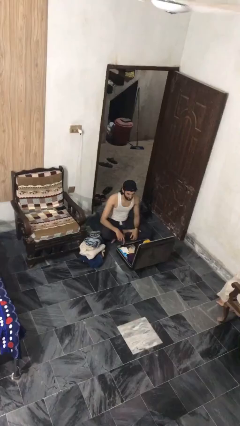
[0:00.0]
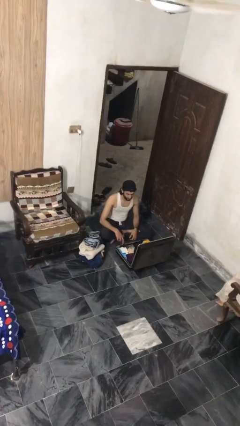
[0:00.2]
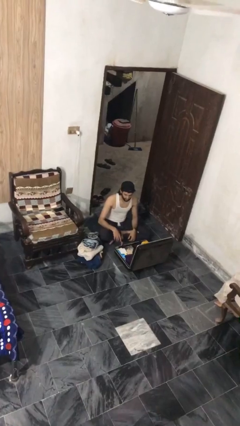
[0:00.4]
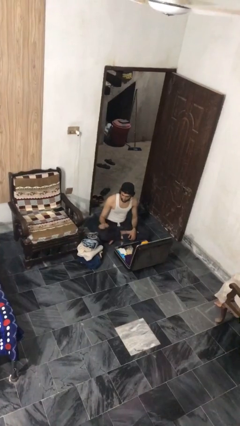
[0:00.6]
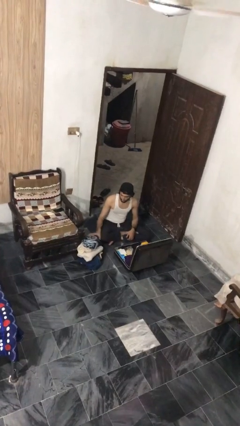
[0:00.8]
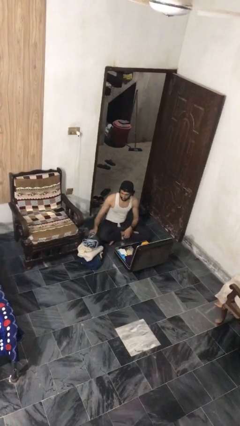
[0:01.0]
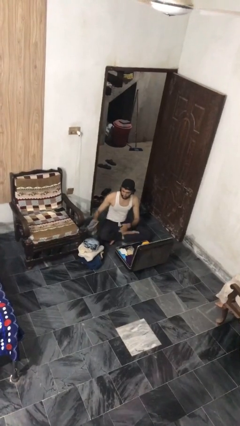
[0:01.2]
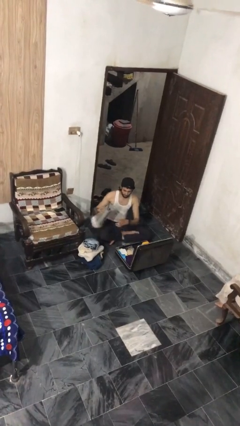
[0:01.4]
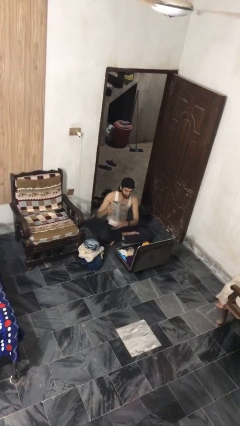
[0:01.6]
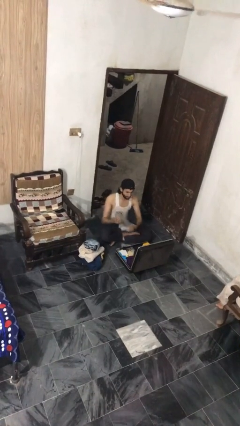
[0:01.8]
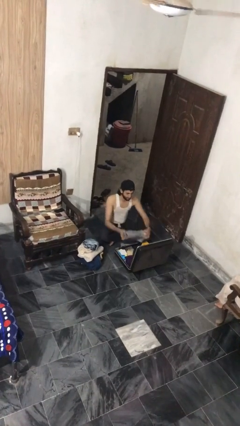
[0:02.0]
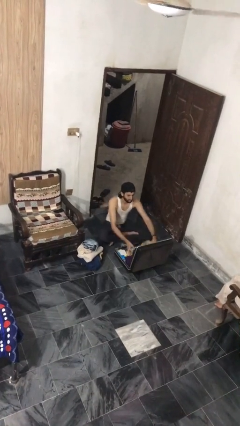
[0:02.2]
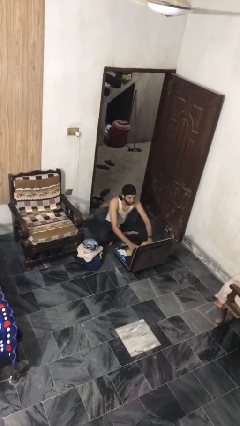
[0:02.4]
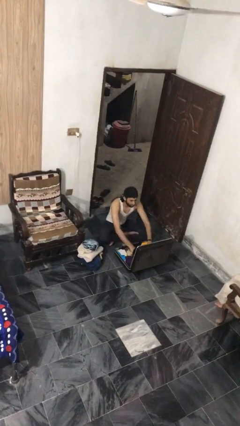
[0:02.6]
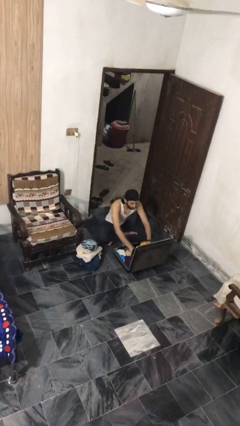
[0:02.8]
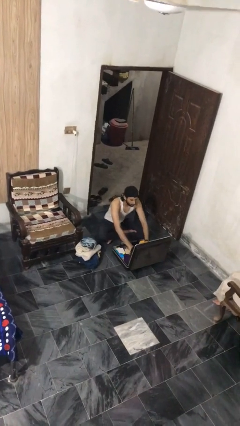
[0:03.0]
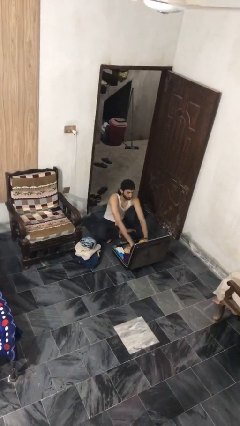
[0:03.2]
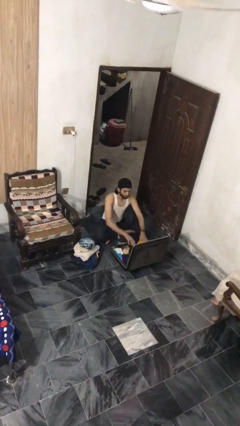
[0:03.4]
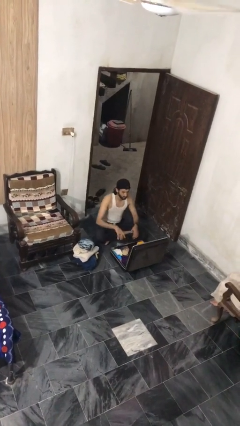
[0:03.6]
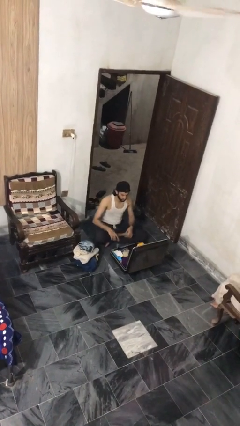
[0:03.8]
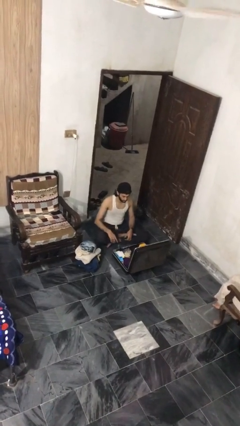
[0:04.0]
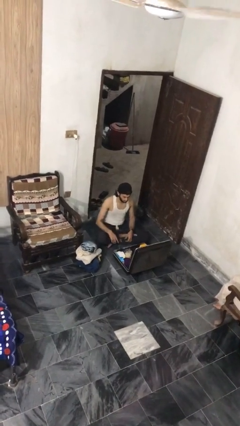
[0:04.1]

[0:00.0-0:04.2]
person loads clothes into suitcase

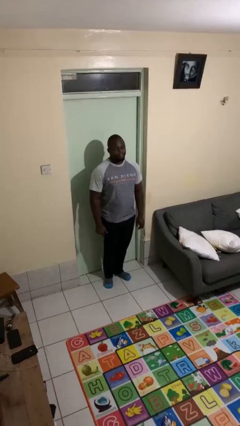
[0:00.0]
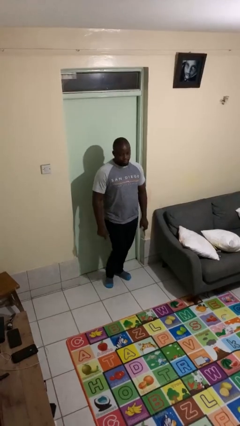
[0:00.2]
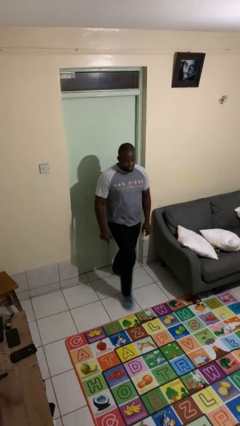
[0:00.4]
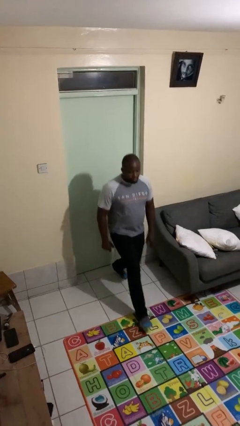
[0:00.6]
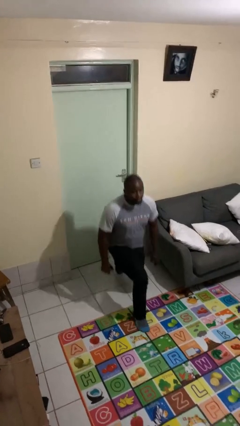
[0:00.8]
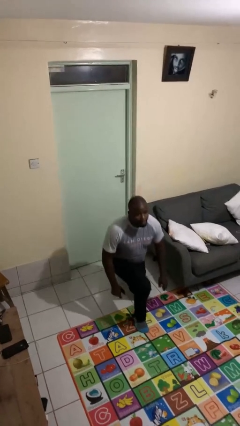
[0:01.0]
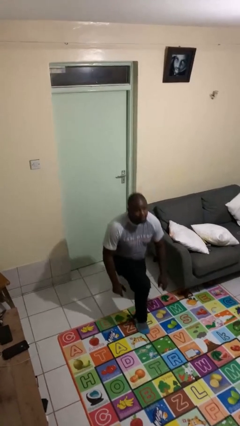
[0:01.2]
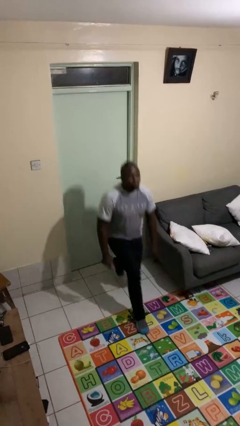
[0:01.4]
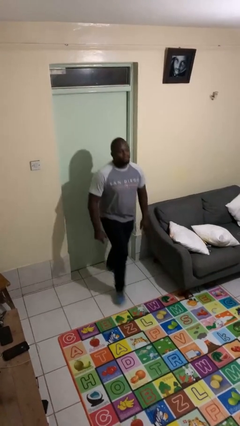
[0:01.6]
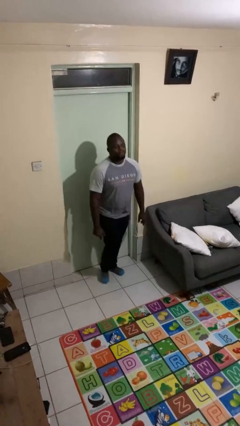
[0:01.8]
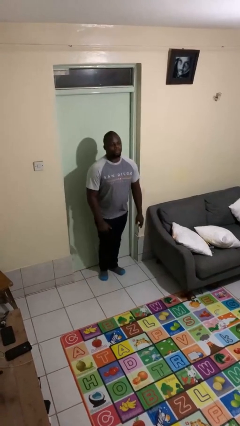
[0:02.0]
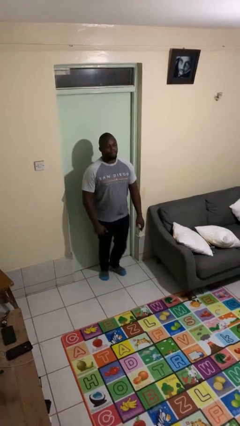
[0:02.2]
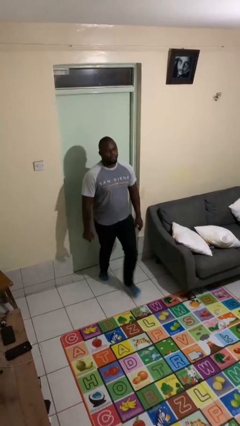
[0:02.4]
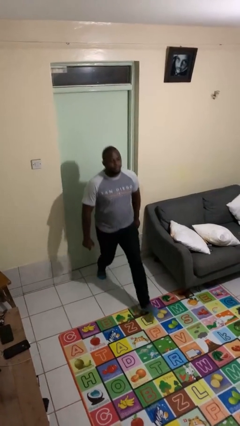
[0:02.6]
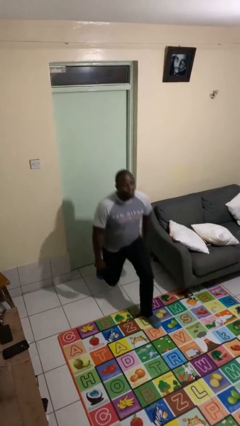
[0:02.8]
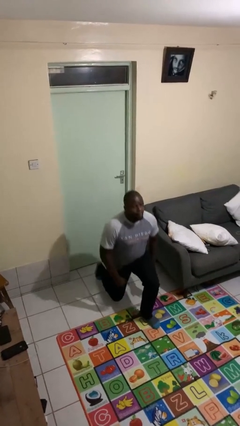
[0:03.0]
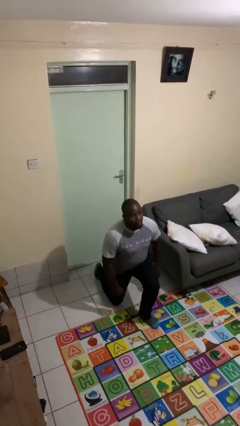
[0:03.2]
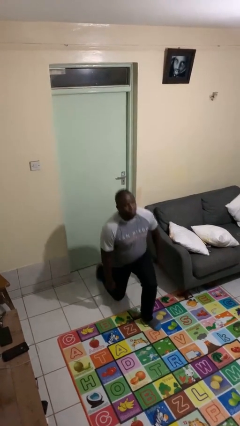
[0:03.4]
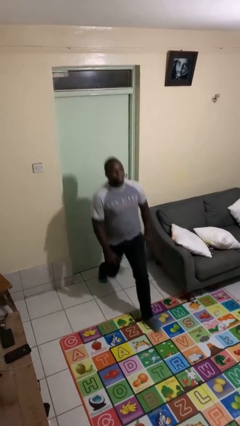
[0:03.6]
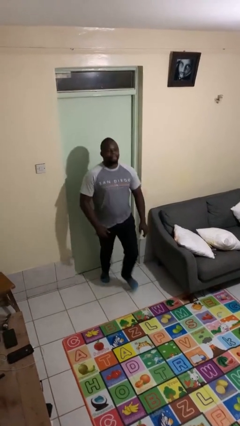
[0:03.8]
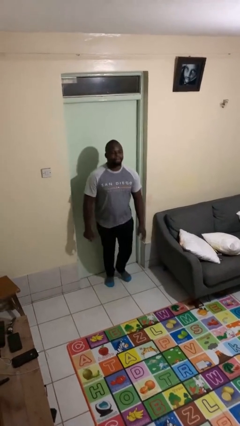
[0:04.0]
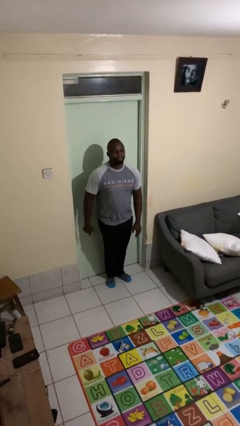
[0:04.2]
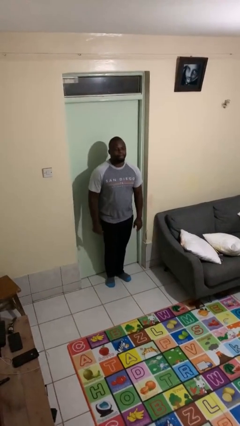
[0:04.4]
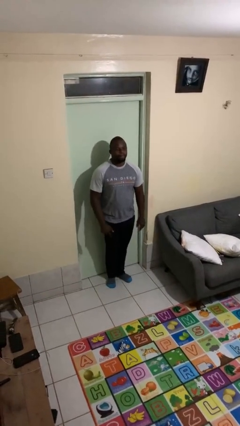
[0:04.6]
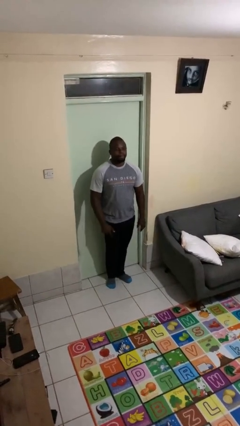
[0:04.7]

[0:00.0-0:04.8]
person exercises with lunges

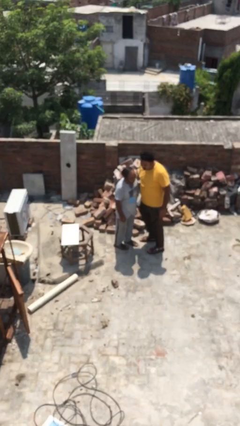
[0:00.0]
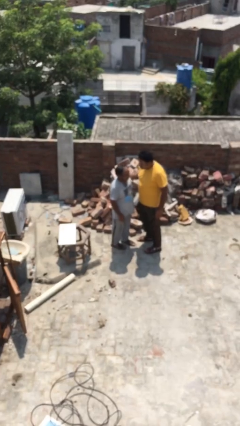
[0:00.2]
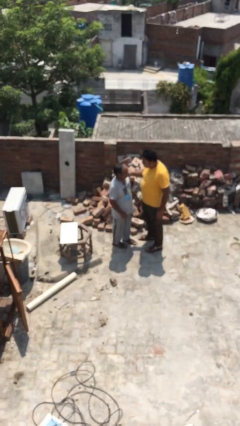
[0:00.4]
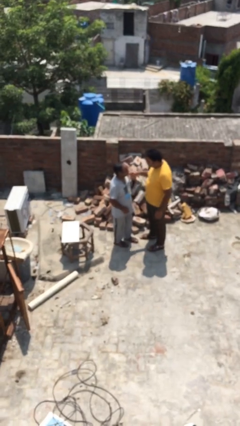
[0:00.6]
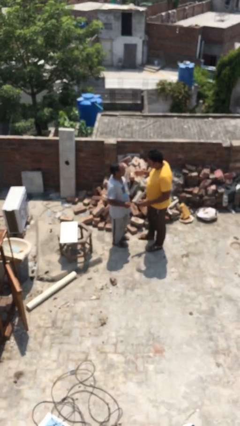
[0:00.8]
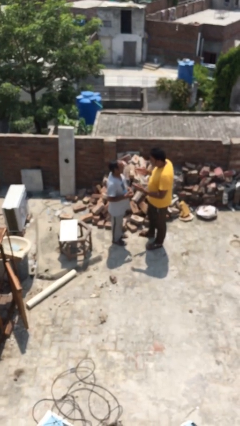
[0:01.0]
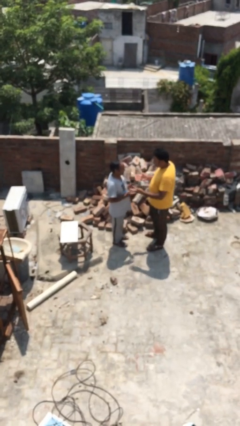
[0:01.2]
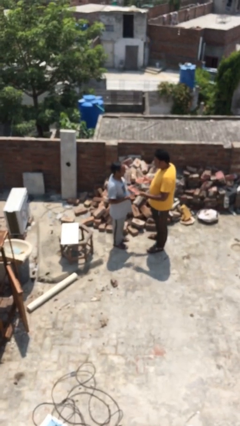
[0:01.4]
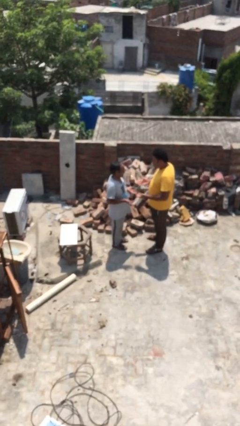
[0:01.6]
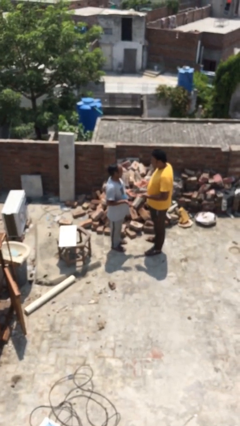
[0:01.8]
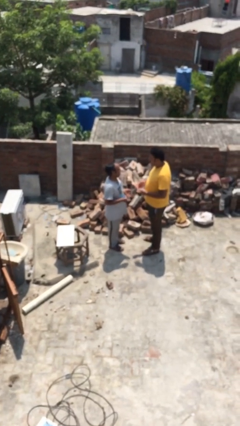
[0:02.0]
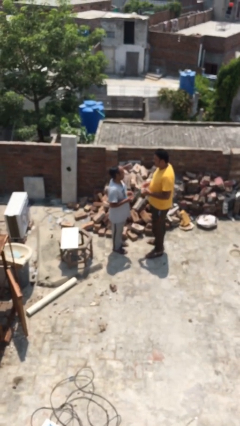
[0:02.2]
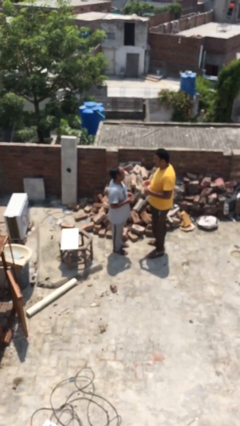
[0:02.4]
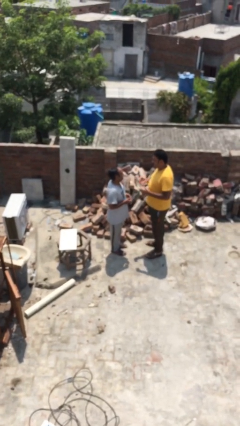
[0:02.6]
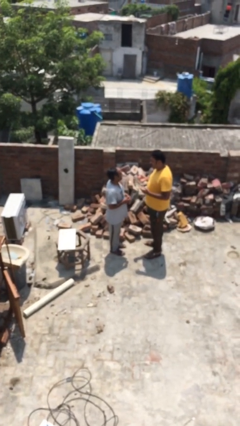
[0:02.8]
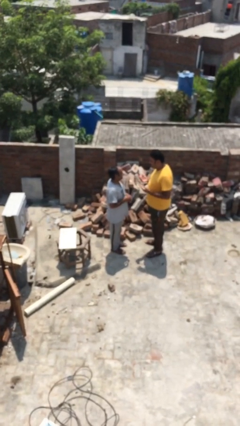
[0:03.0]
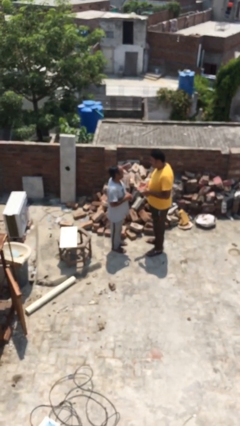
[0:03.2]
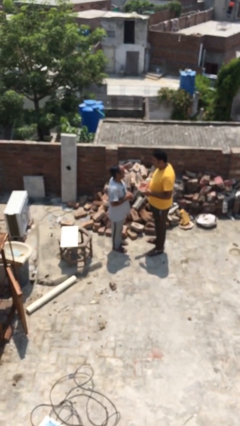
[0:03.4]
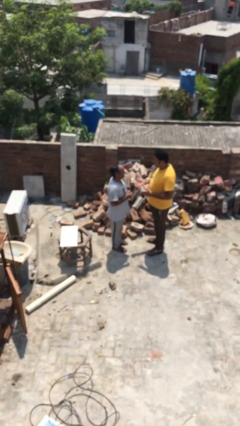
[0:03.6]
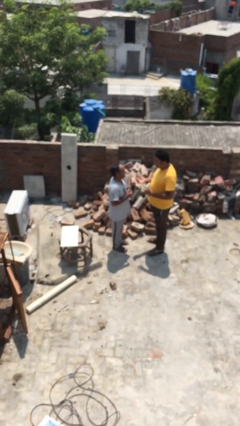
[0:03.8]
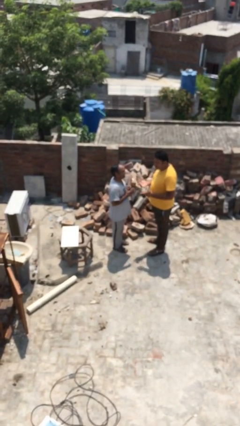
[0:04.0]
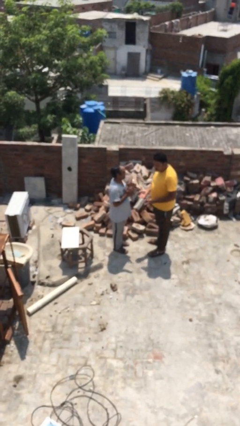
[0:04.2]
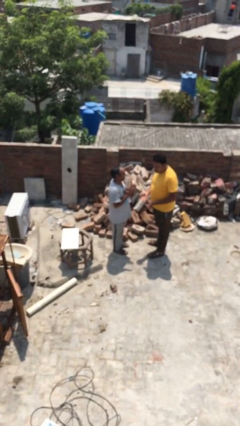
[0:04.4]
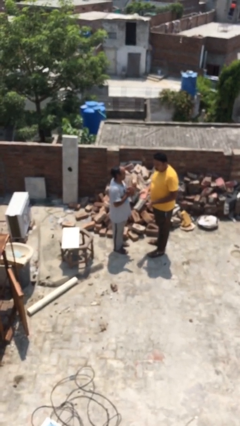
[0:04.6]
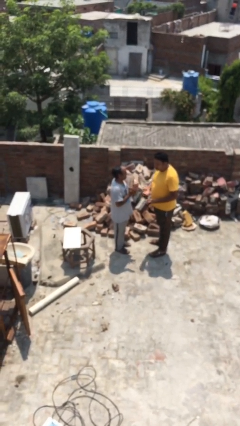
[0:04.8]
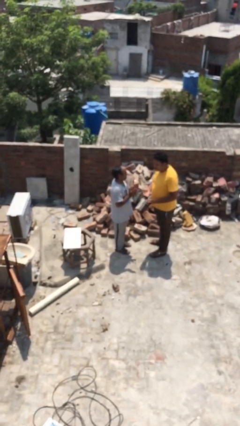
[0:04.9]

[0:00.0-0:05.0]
person talks to person

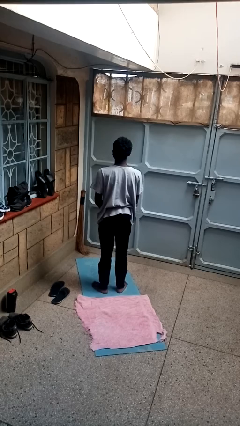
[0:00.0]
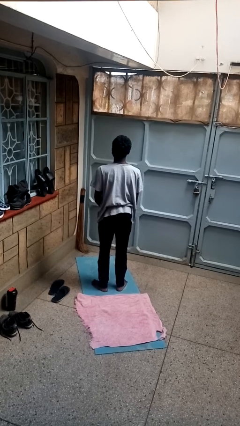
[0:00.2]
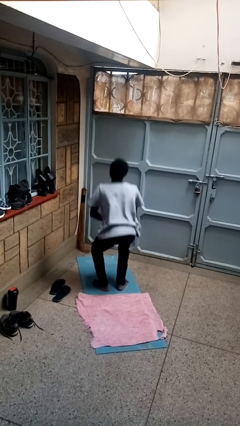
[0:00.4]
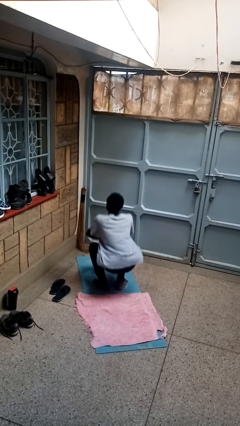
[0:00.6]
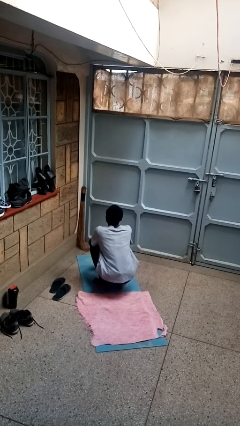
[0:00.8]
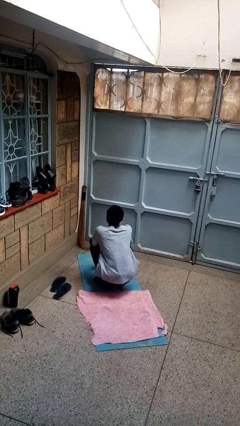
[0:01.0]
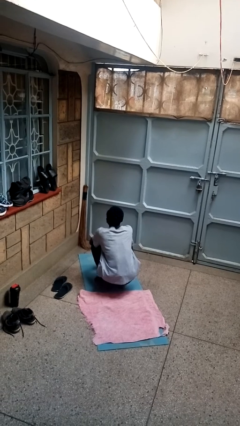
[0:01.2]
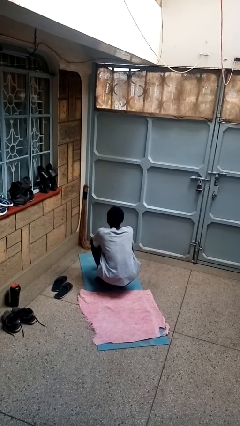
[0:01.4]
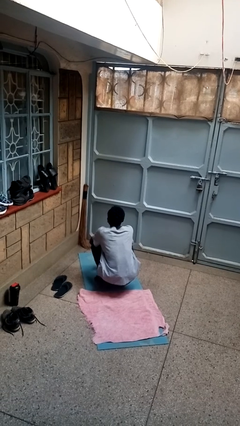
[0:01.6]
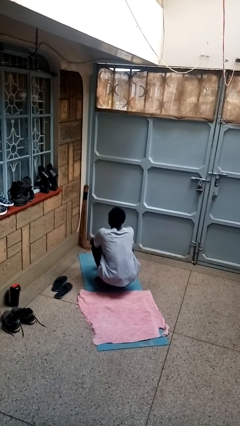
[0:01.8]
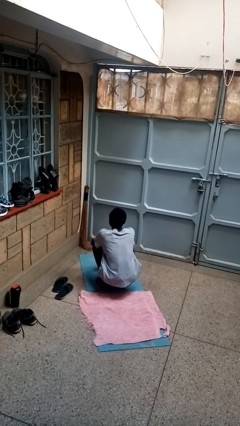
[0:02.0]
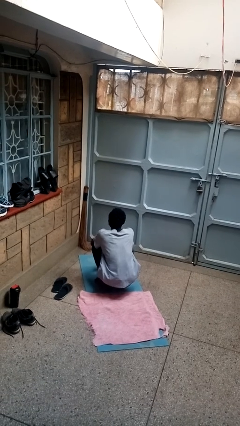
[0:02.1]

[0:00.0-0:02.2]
person squats

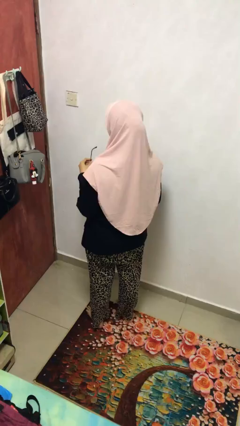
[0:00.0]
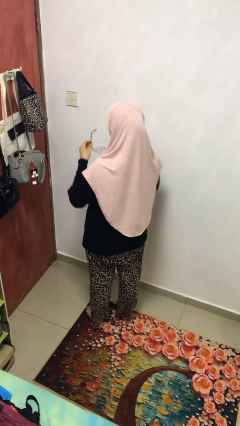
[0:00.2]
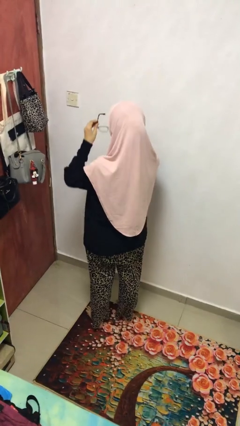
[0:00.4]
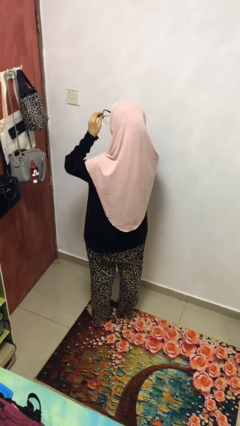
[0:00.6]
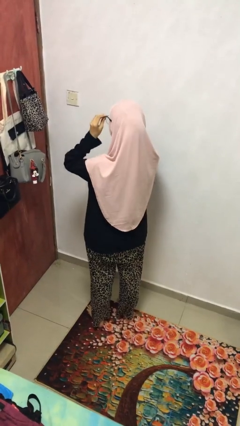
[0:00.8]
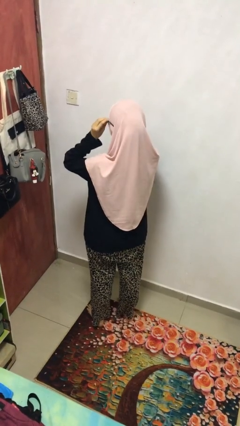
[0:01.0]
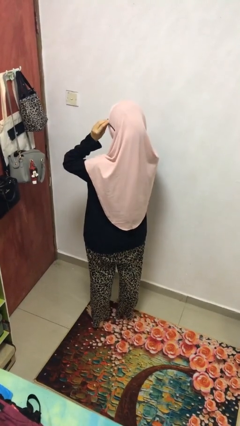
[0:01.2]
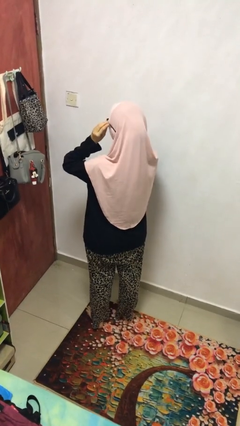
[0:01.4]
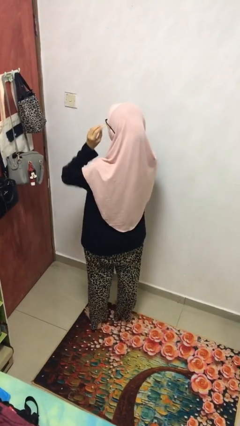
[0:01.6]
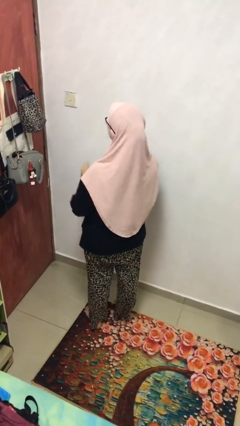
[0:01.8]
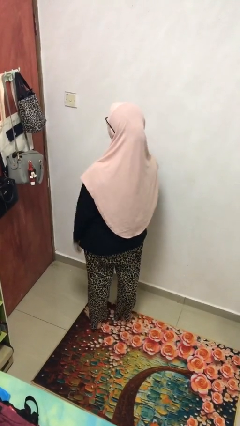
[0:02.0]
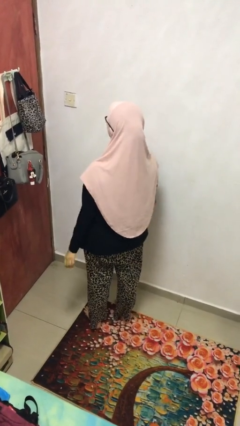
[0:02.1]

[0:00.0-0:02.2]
person puts on glasses
